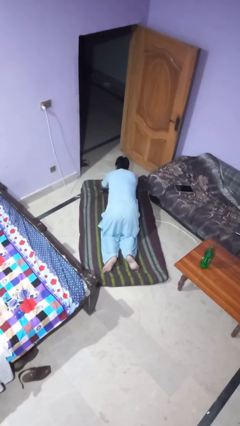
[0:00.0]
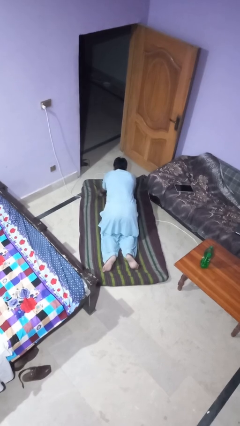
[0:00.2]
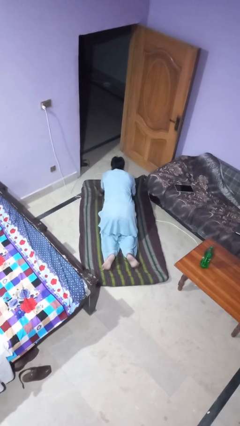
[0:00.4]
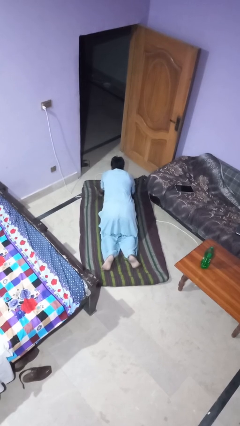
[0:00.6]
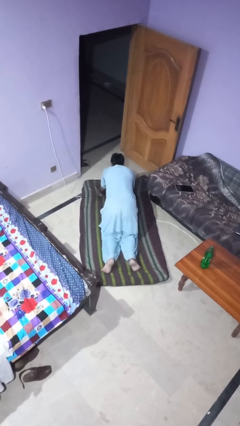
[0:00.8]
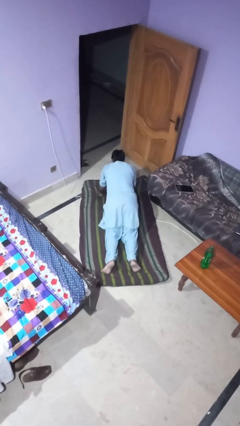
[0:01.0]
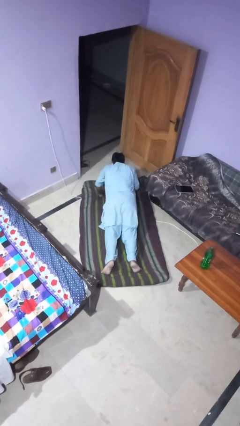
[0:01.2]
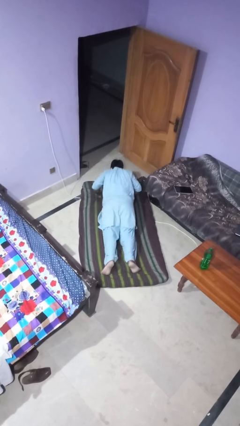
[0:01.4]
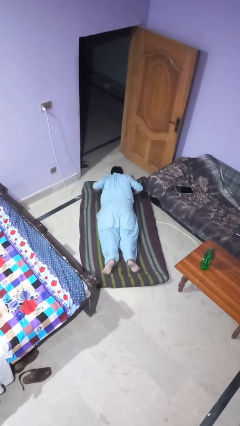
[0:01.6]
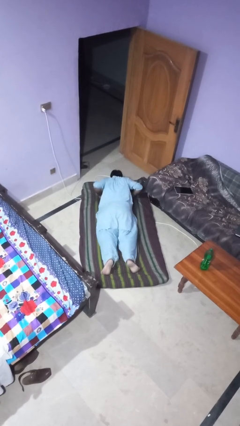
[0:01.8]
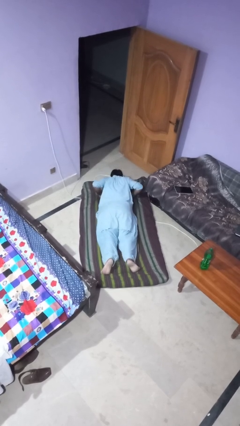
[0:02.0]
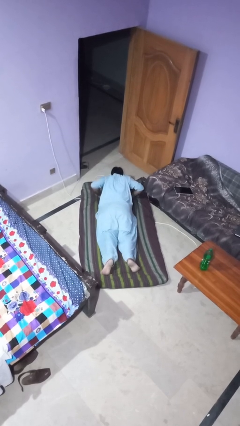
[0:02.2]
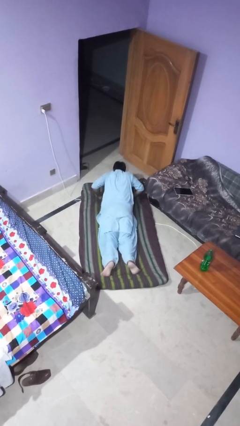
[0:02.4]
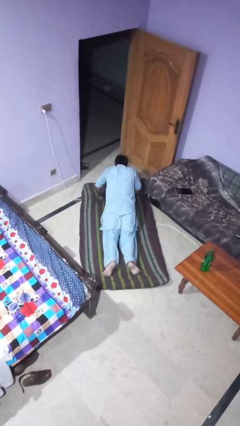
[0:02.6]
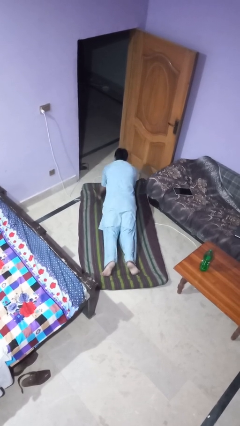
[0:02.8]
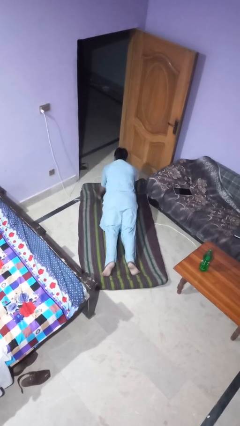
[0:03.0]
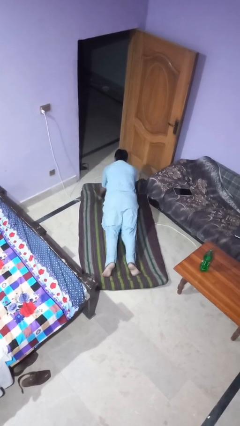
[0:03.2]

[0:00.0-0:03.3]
person exercises with pushup

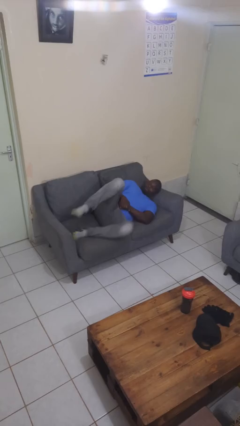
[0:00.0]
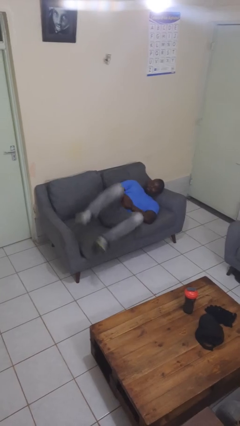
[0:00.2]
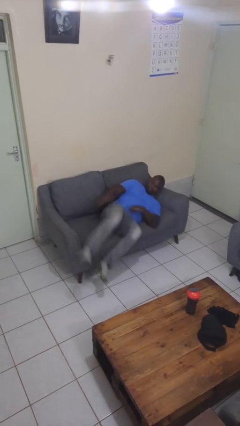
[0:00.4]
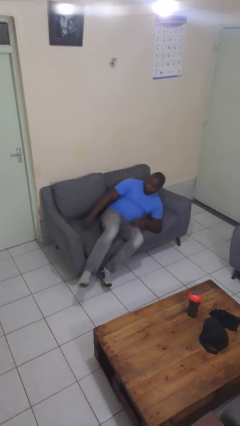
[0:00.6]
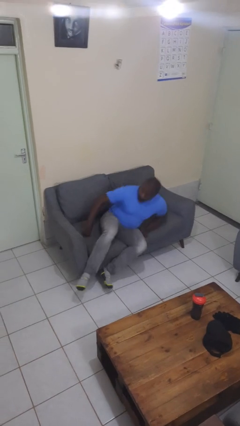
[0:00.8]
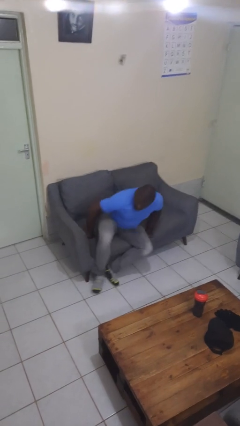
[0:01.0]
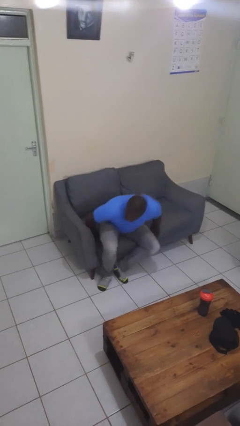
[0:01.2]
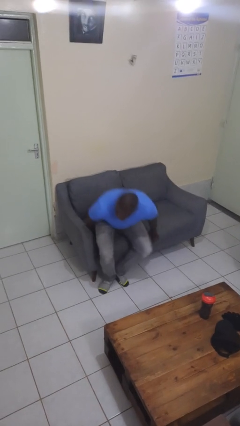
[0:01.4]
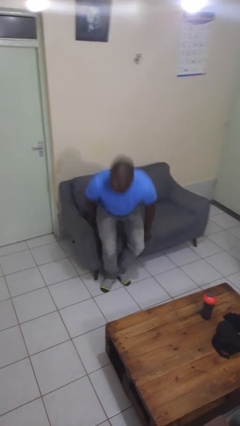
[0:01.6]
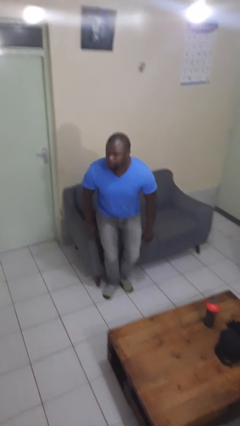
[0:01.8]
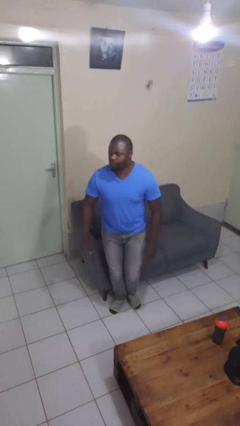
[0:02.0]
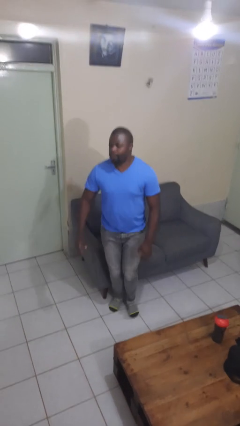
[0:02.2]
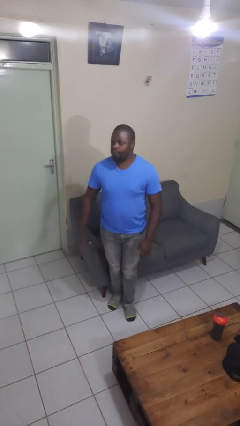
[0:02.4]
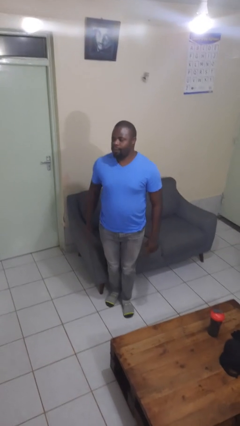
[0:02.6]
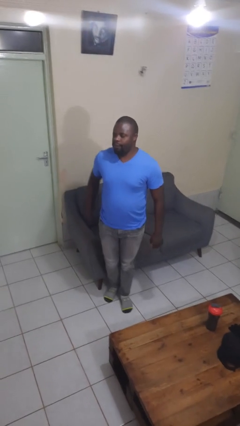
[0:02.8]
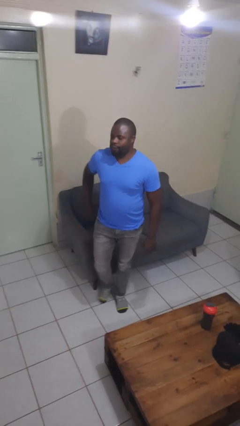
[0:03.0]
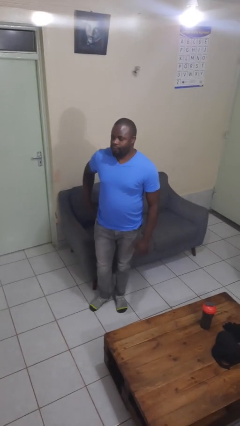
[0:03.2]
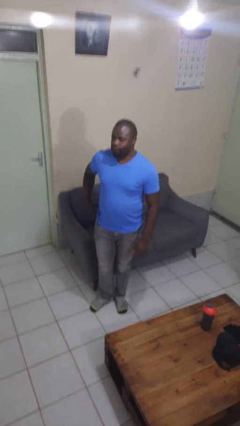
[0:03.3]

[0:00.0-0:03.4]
person stands up

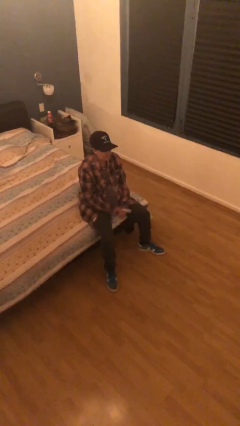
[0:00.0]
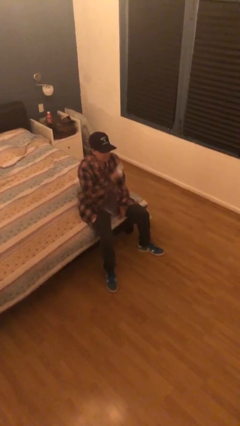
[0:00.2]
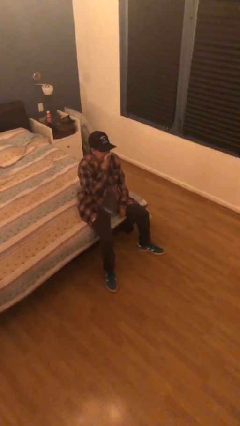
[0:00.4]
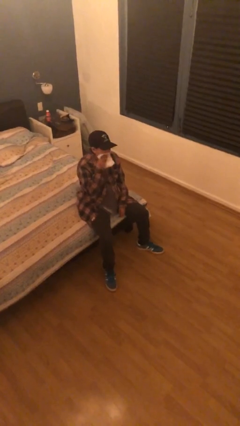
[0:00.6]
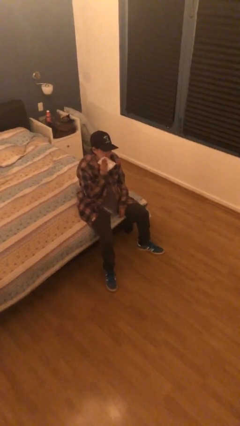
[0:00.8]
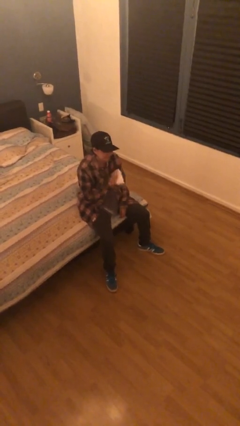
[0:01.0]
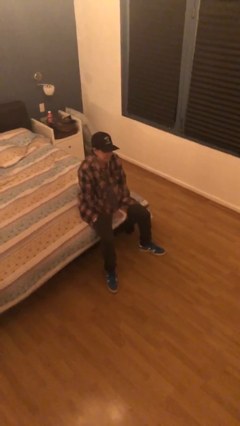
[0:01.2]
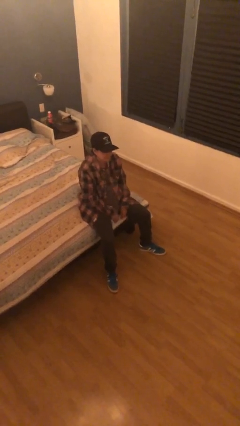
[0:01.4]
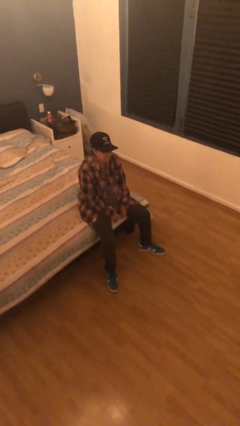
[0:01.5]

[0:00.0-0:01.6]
person wipes mouth with napkin

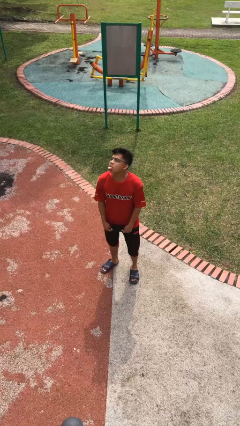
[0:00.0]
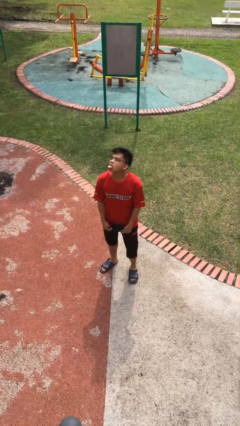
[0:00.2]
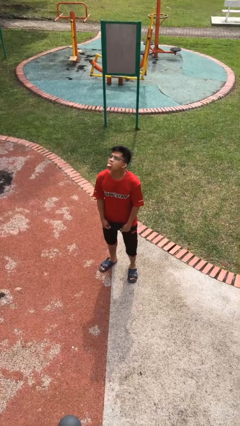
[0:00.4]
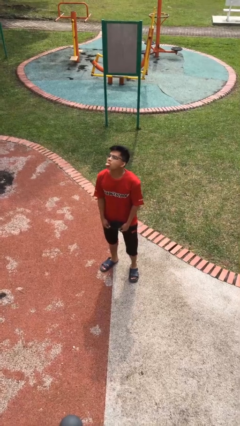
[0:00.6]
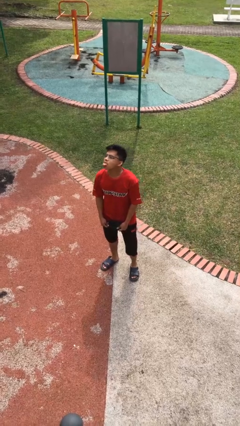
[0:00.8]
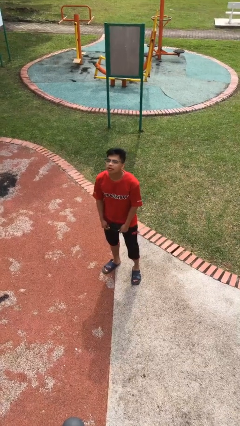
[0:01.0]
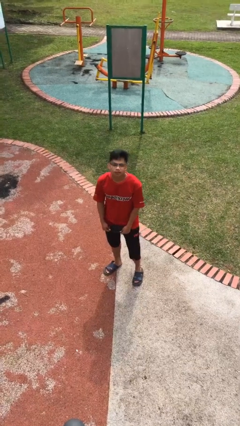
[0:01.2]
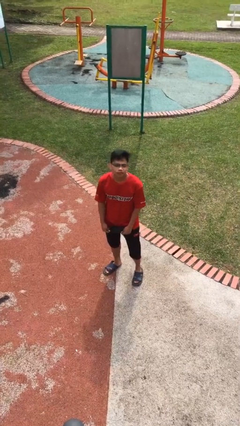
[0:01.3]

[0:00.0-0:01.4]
person sticks out tongue

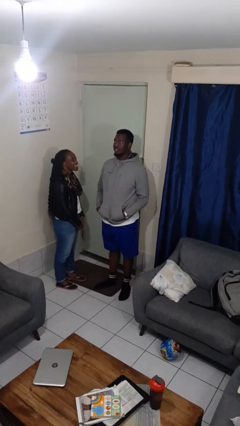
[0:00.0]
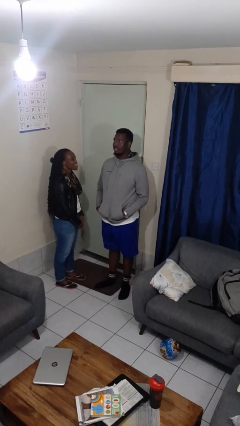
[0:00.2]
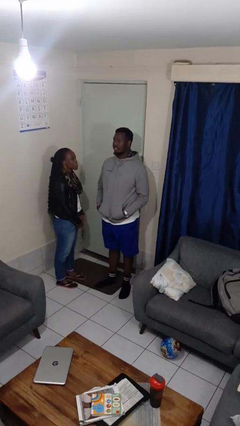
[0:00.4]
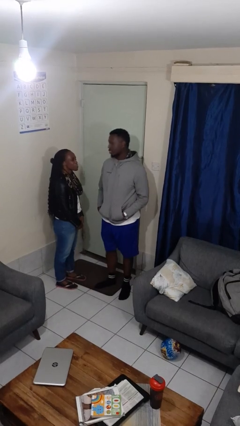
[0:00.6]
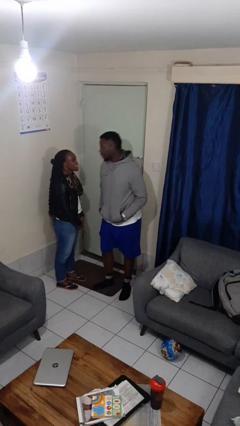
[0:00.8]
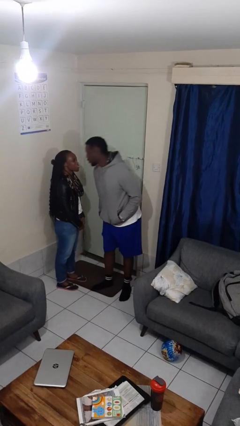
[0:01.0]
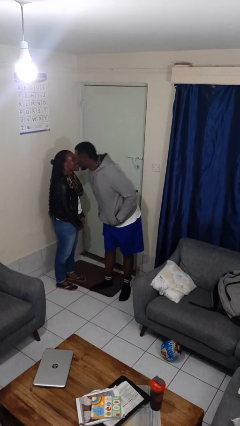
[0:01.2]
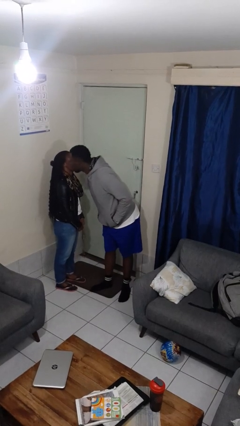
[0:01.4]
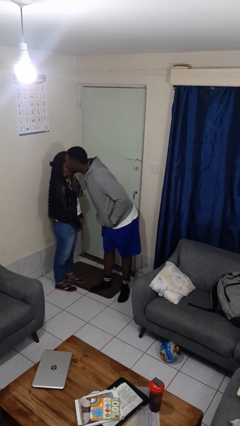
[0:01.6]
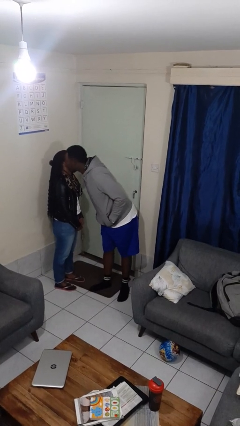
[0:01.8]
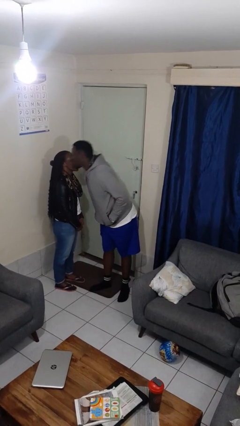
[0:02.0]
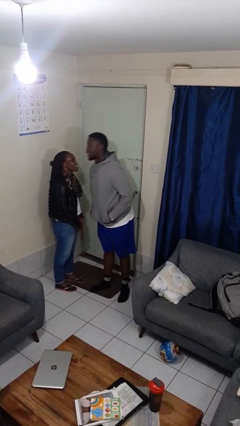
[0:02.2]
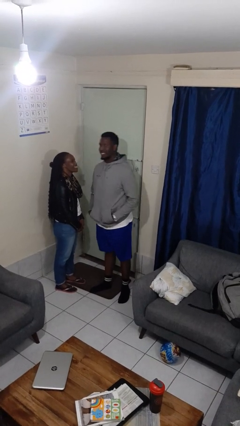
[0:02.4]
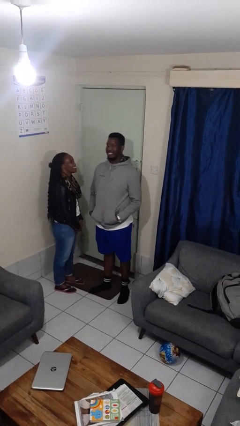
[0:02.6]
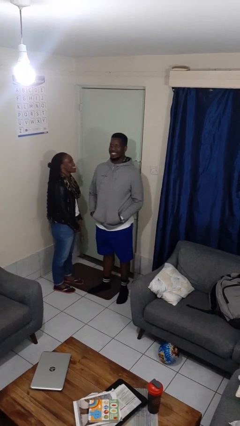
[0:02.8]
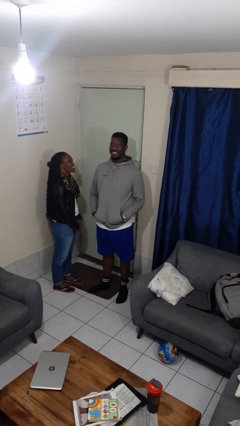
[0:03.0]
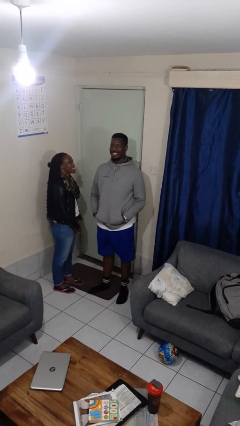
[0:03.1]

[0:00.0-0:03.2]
person kisses cheek of person

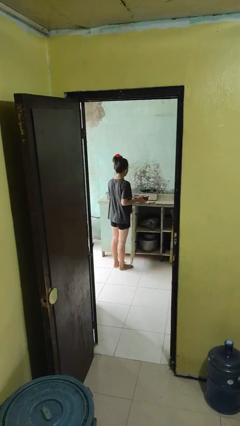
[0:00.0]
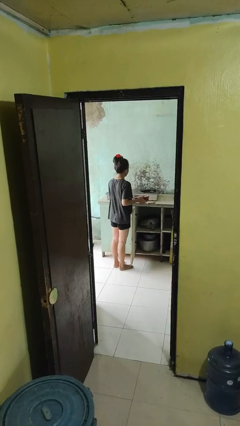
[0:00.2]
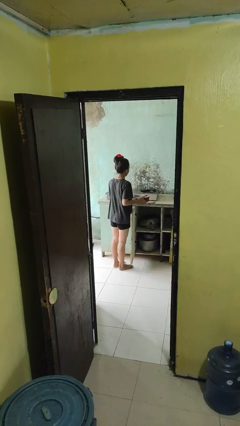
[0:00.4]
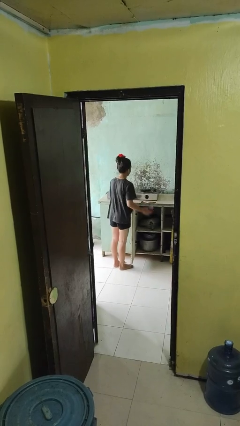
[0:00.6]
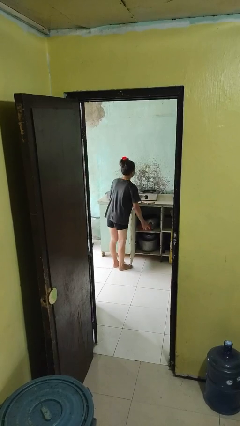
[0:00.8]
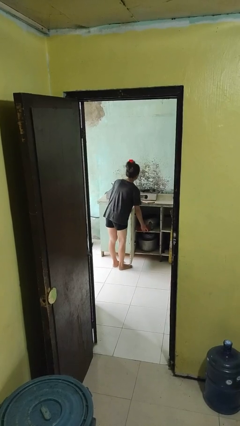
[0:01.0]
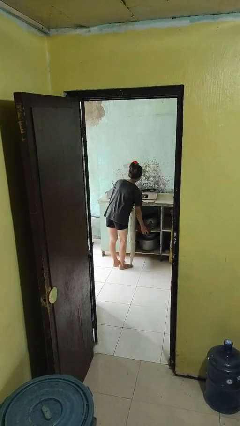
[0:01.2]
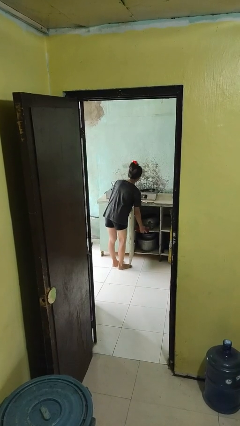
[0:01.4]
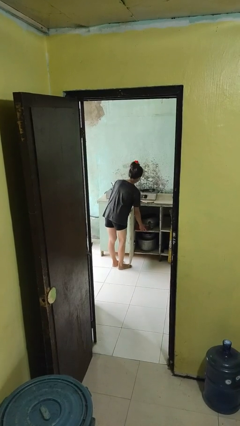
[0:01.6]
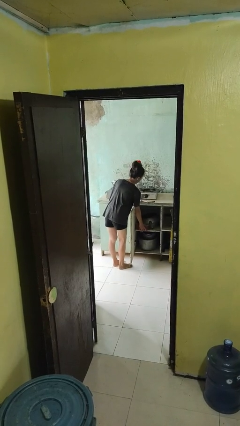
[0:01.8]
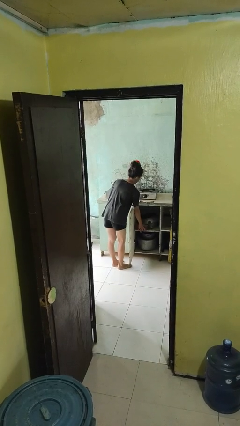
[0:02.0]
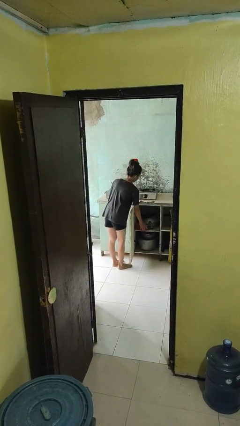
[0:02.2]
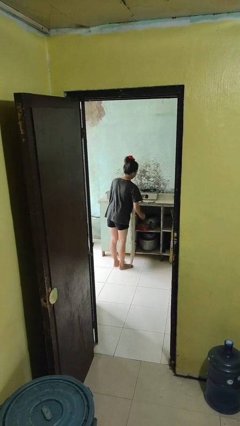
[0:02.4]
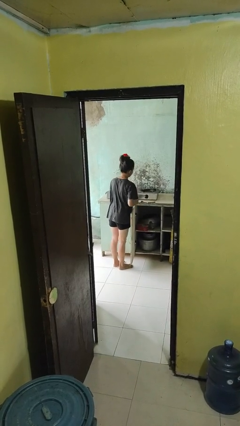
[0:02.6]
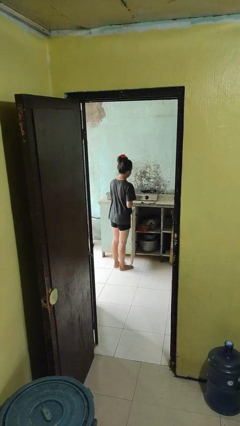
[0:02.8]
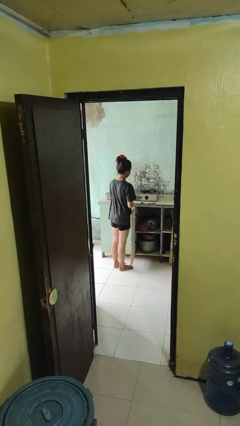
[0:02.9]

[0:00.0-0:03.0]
person puts object in cabinet

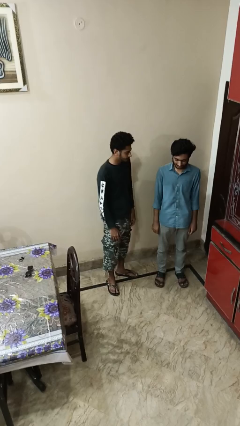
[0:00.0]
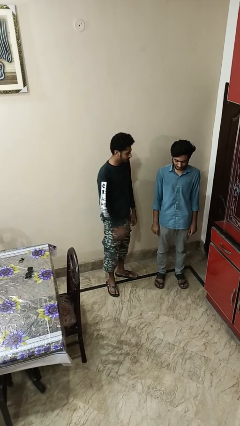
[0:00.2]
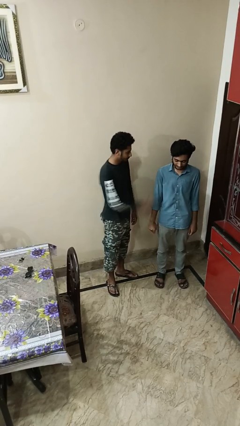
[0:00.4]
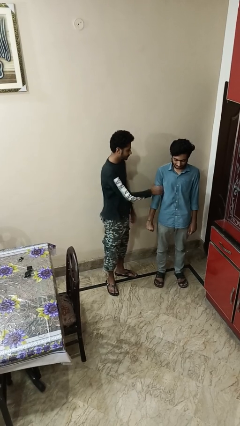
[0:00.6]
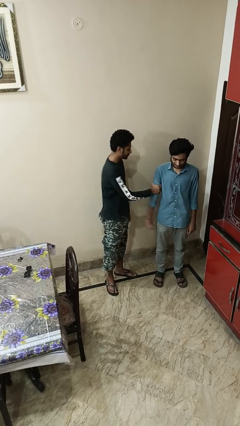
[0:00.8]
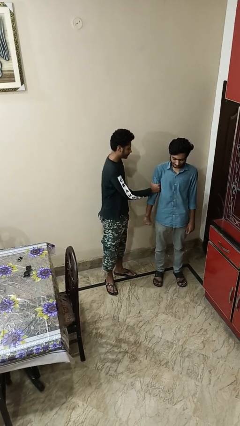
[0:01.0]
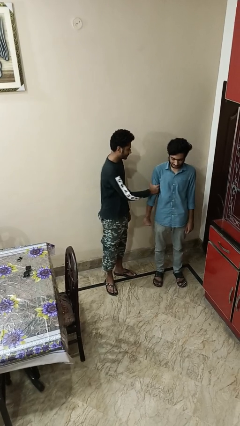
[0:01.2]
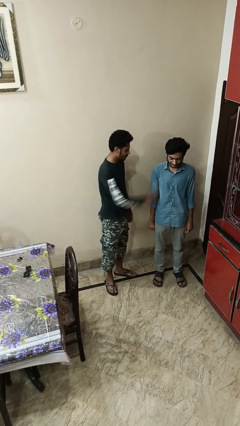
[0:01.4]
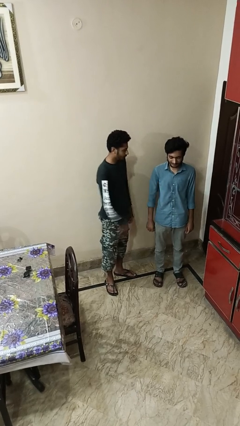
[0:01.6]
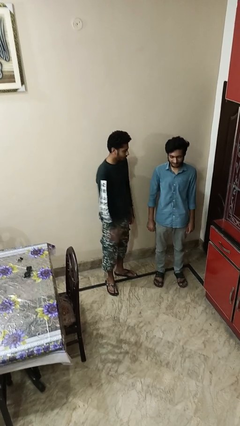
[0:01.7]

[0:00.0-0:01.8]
person grabs person by bicep
